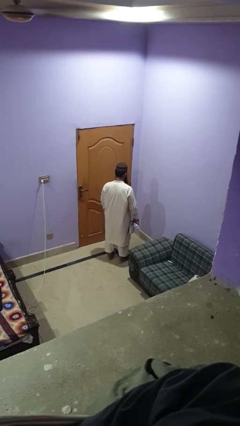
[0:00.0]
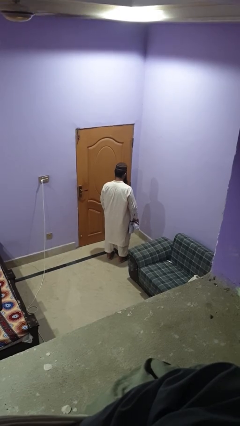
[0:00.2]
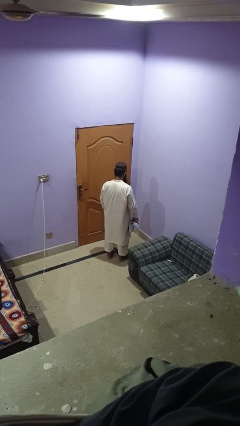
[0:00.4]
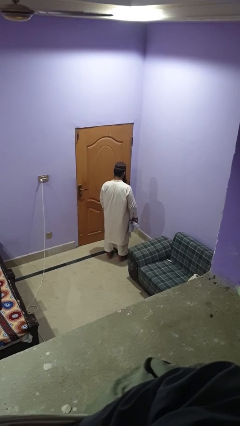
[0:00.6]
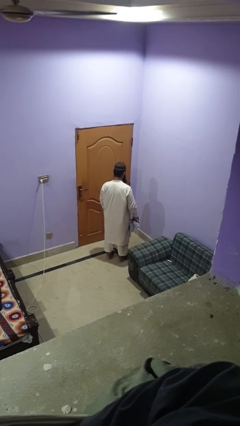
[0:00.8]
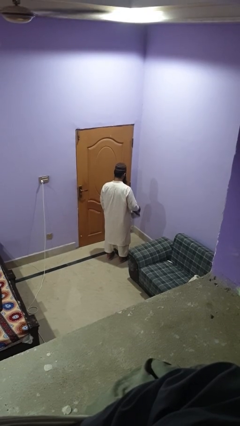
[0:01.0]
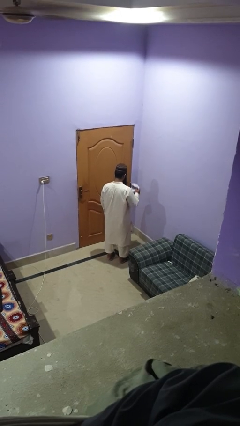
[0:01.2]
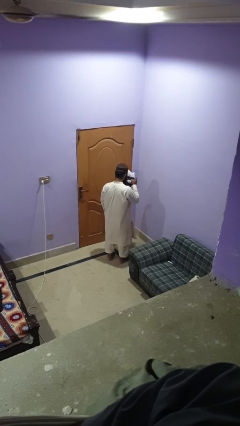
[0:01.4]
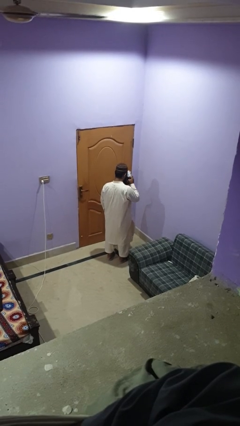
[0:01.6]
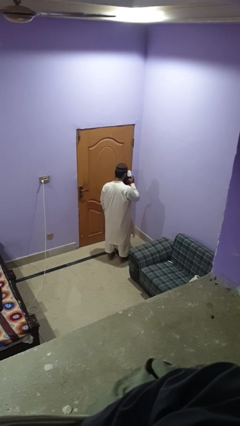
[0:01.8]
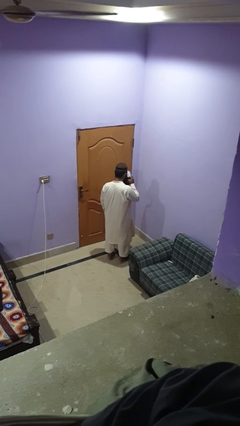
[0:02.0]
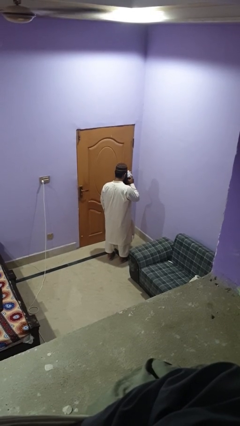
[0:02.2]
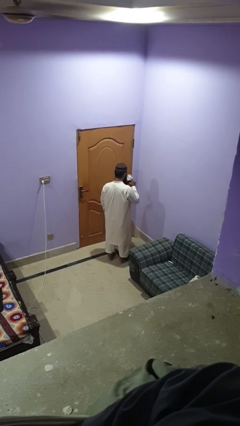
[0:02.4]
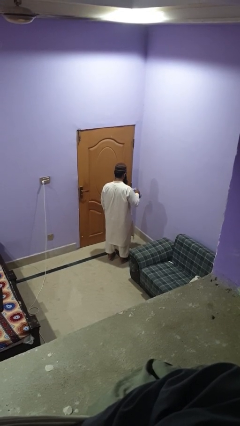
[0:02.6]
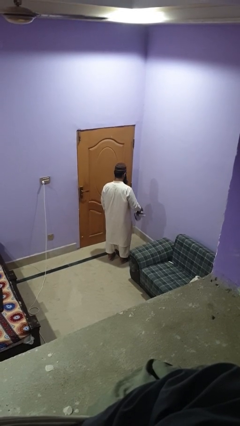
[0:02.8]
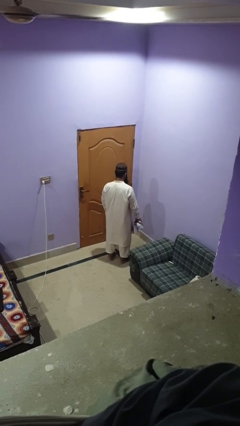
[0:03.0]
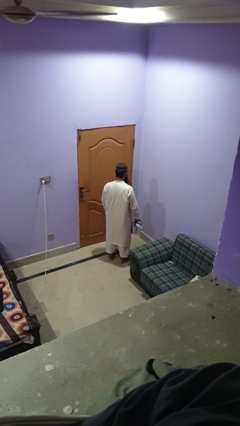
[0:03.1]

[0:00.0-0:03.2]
person blows nose

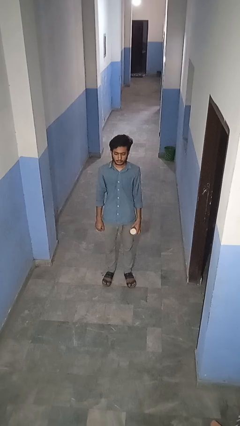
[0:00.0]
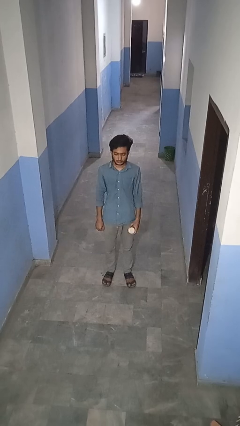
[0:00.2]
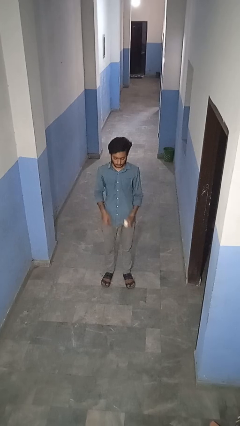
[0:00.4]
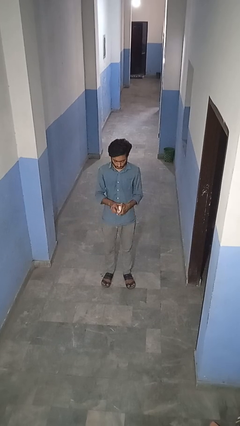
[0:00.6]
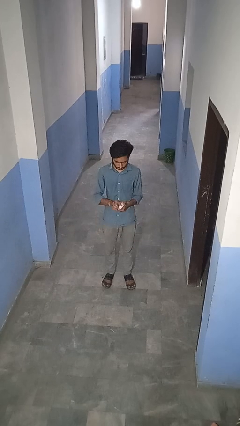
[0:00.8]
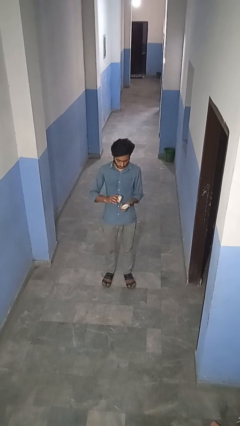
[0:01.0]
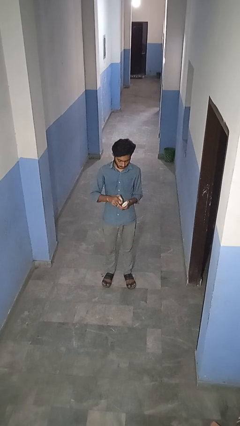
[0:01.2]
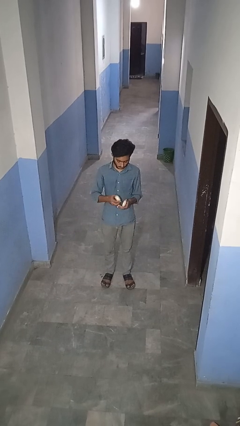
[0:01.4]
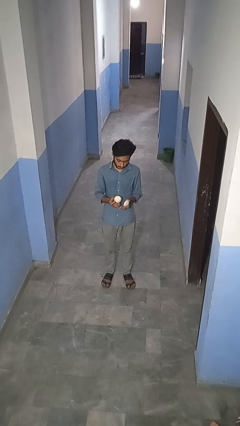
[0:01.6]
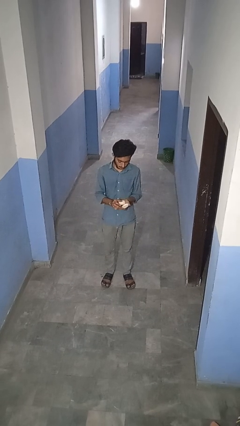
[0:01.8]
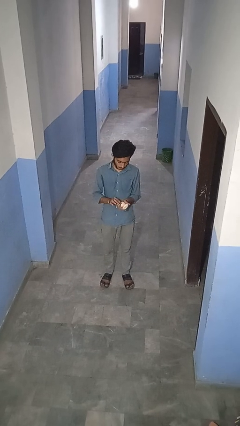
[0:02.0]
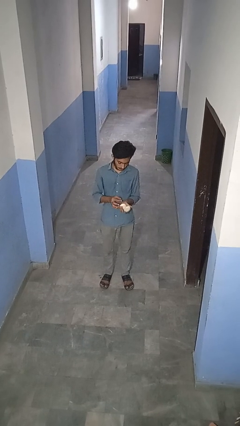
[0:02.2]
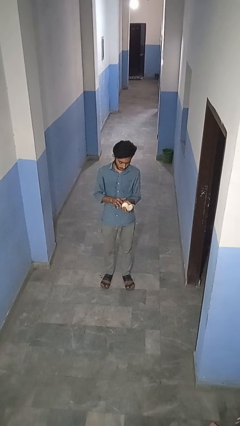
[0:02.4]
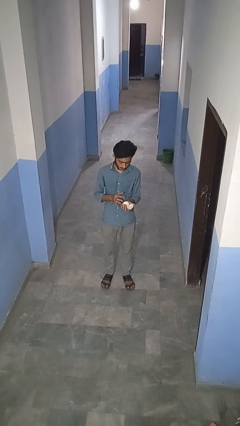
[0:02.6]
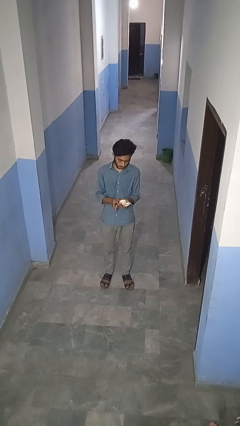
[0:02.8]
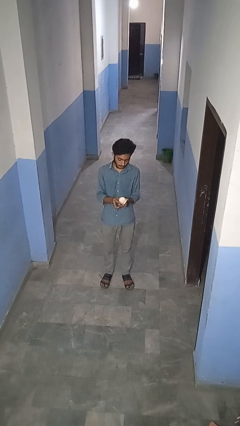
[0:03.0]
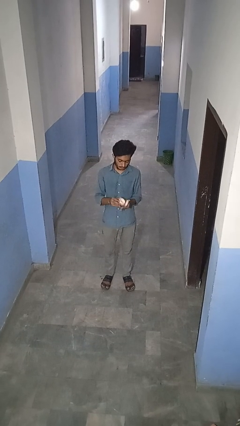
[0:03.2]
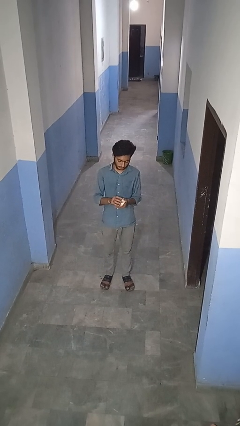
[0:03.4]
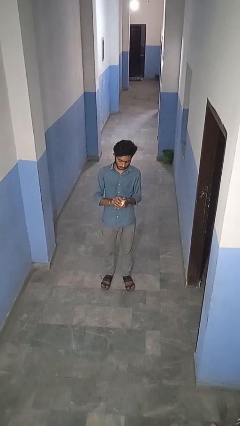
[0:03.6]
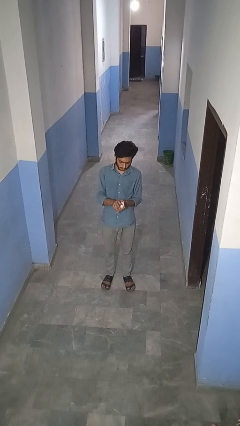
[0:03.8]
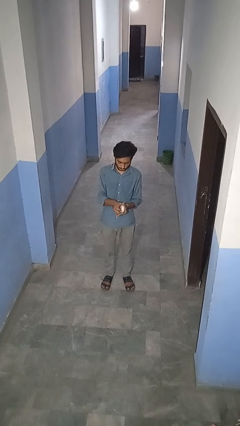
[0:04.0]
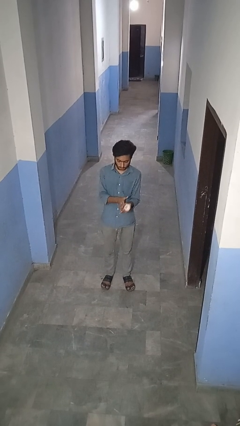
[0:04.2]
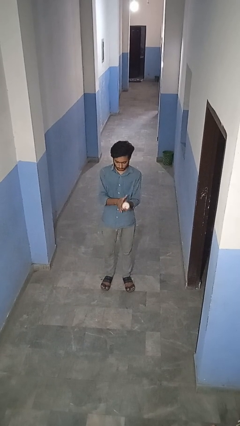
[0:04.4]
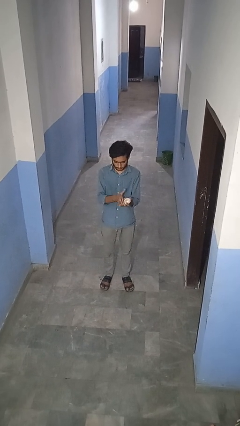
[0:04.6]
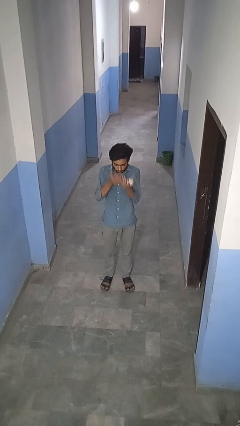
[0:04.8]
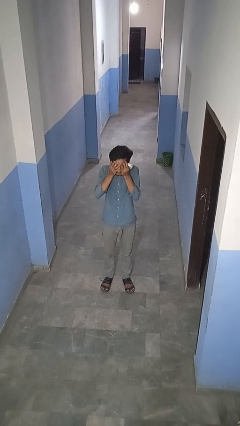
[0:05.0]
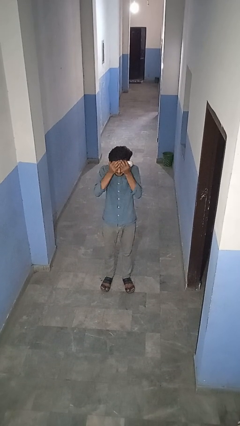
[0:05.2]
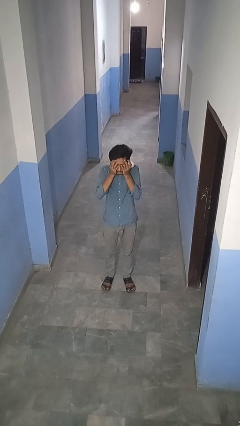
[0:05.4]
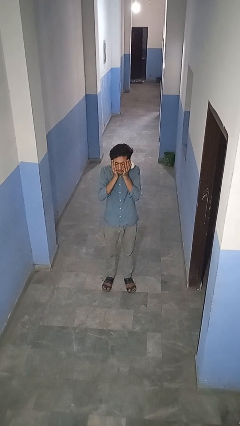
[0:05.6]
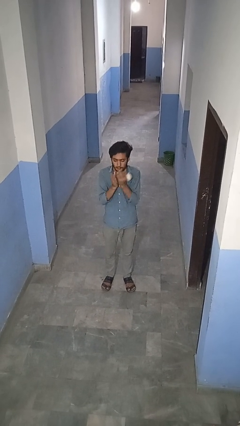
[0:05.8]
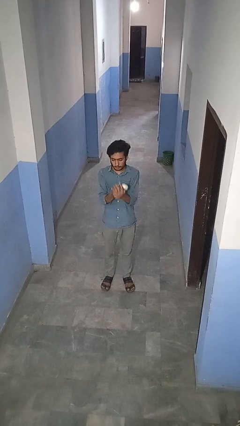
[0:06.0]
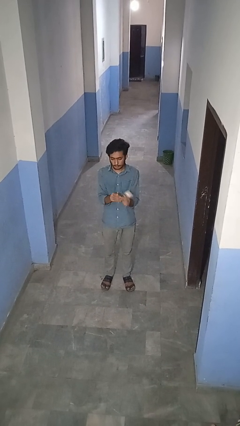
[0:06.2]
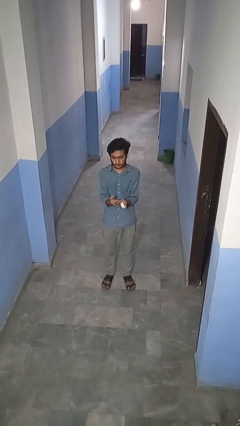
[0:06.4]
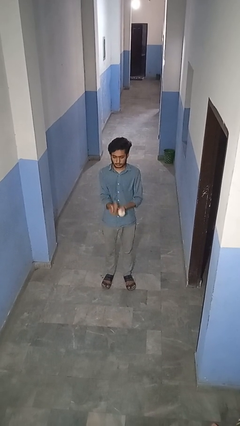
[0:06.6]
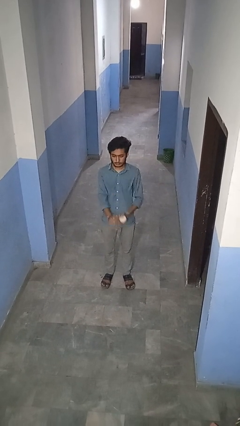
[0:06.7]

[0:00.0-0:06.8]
person applies facial moisturizer

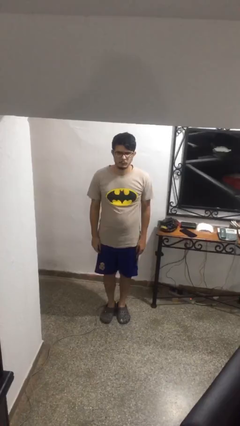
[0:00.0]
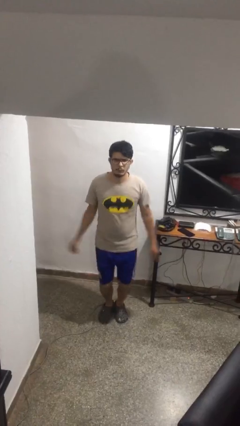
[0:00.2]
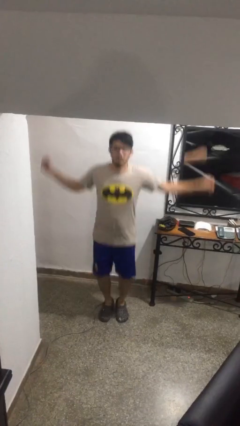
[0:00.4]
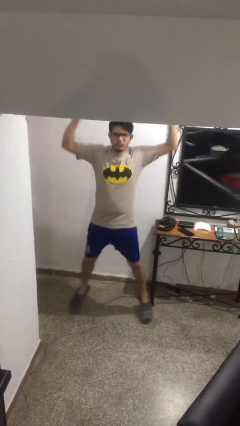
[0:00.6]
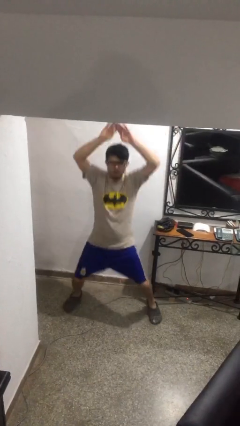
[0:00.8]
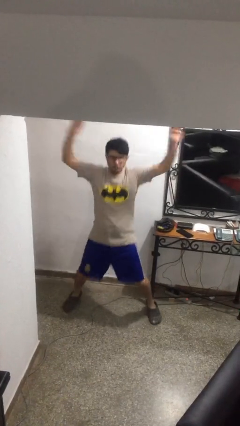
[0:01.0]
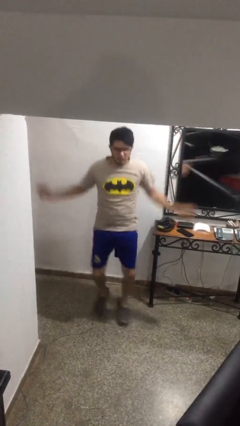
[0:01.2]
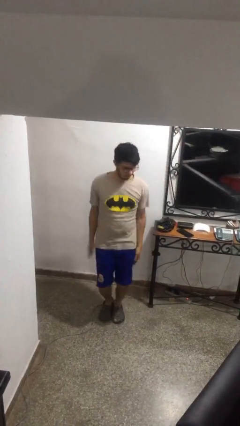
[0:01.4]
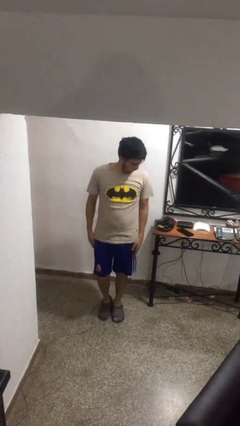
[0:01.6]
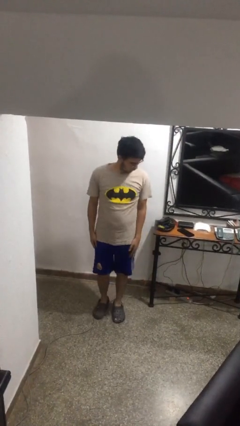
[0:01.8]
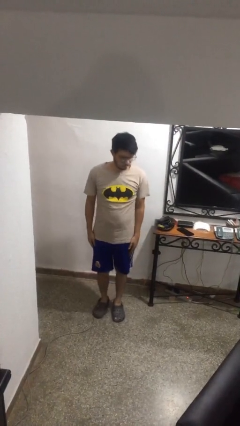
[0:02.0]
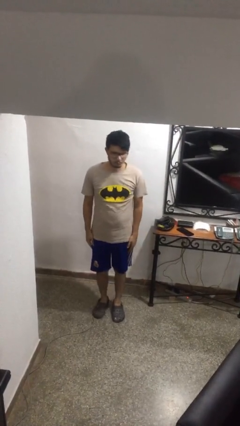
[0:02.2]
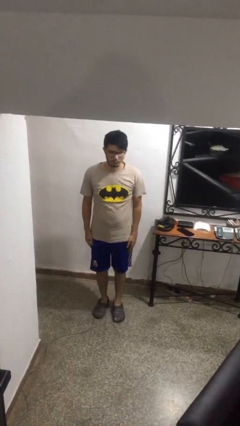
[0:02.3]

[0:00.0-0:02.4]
person exercises with jumping jacks

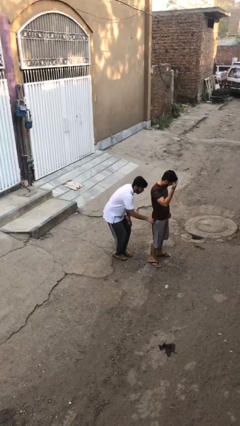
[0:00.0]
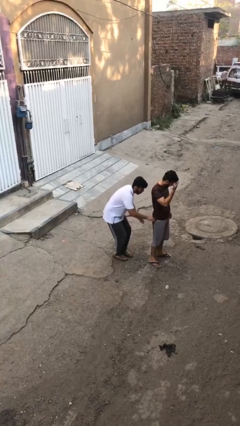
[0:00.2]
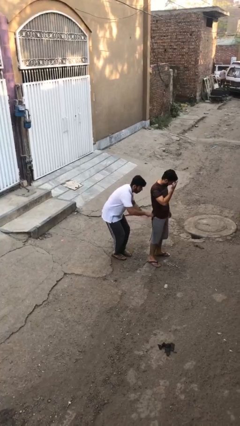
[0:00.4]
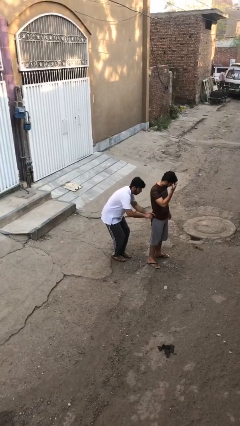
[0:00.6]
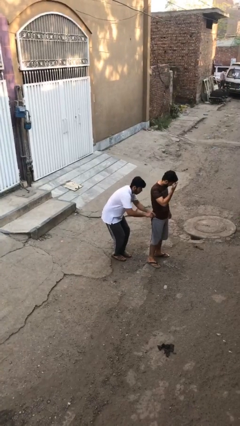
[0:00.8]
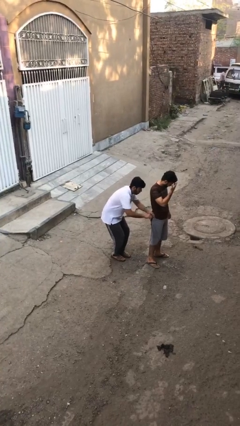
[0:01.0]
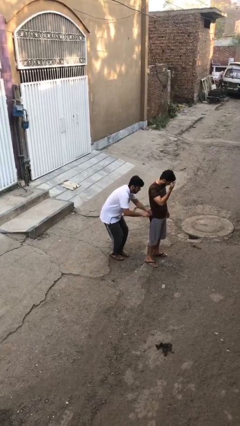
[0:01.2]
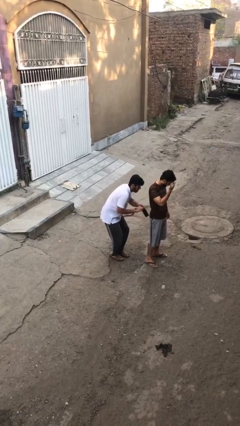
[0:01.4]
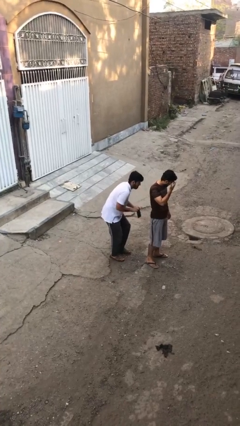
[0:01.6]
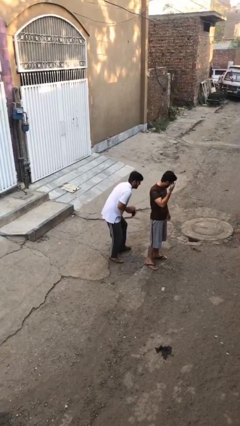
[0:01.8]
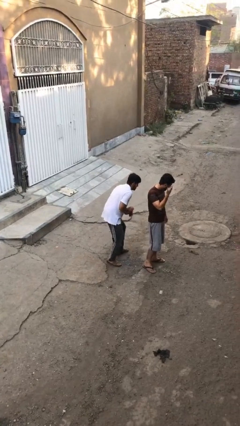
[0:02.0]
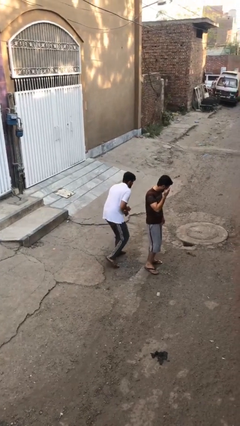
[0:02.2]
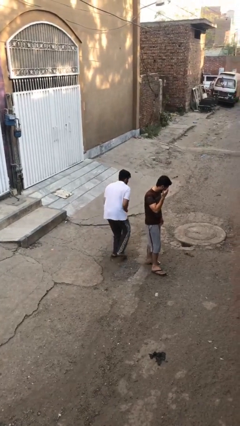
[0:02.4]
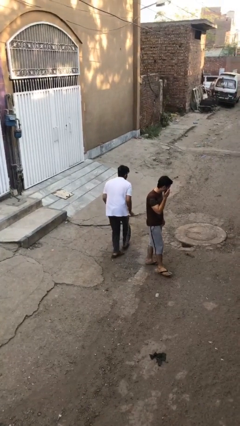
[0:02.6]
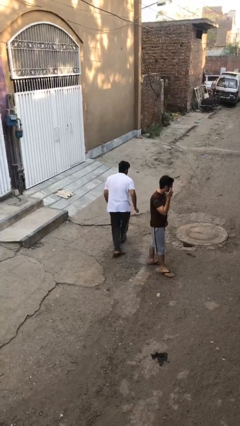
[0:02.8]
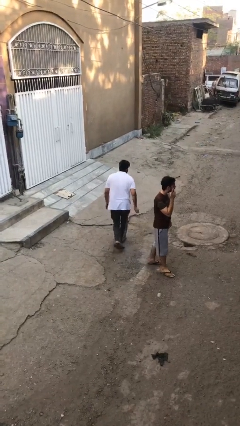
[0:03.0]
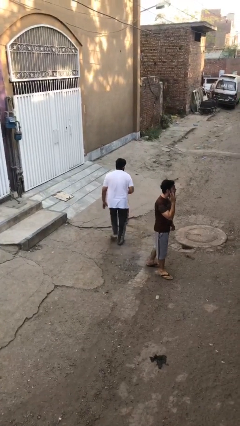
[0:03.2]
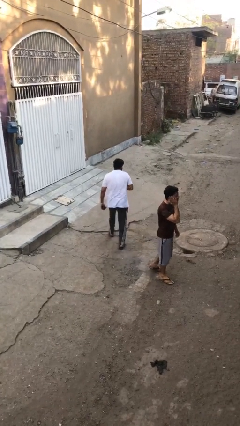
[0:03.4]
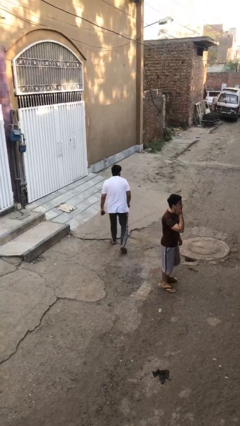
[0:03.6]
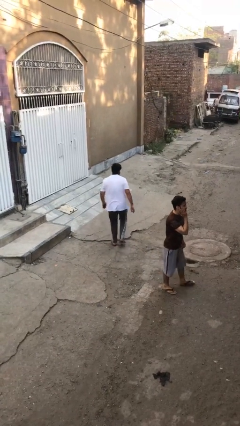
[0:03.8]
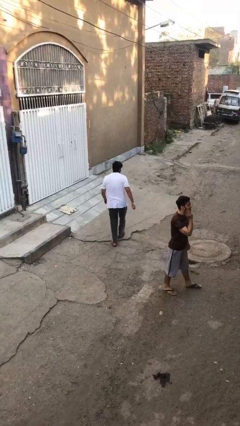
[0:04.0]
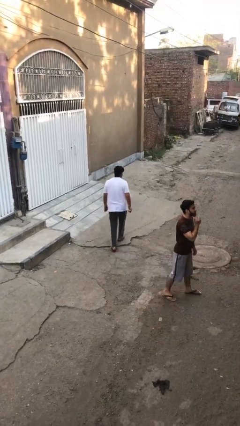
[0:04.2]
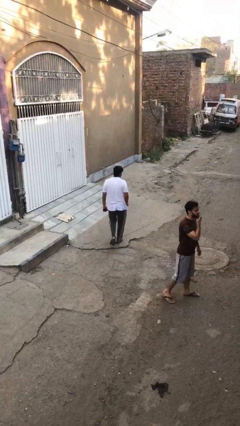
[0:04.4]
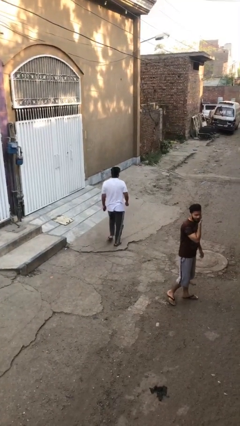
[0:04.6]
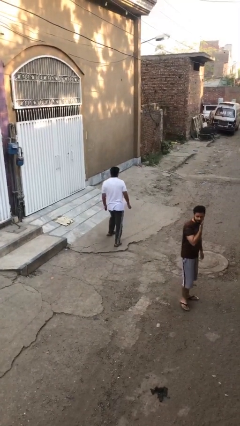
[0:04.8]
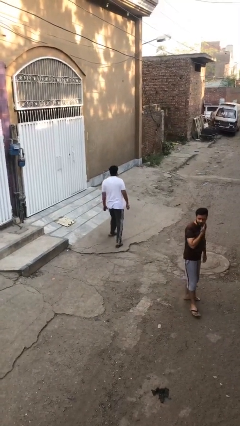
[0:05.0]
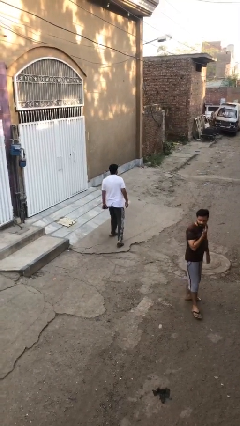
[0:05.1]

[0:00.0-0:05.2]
person steals object from person

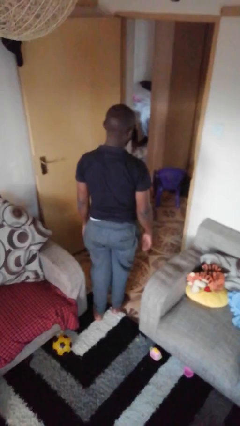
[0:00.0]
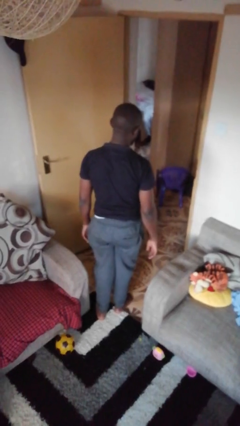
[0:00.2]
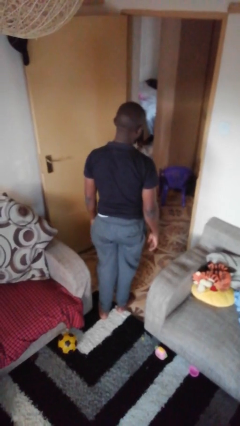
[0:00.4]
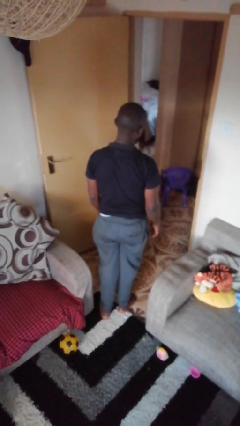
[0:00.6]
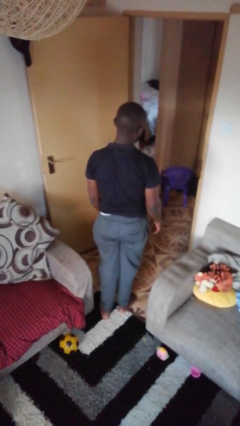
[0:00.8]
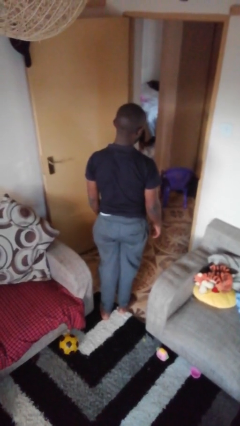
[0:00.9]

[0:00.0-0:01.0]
person stands up from floor
